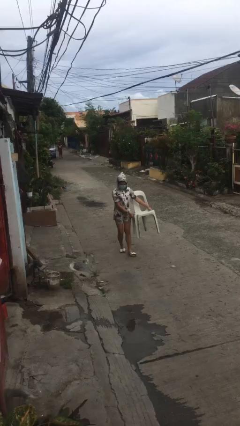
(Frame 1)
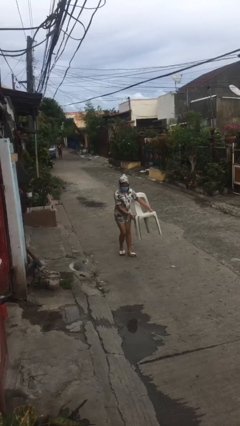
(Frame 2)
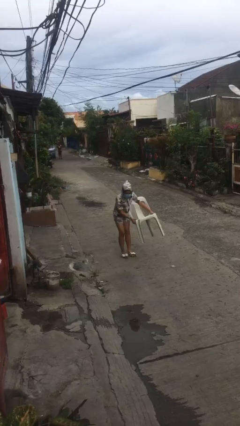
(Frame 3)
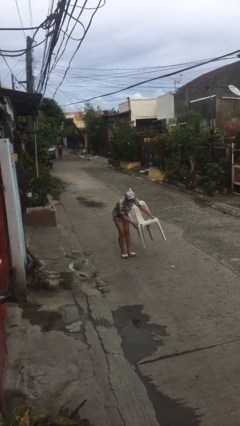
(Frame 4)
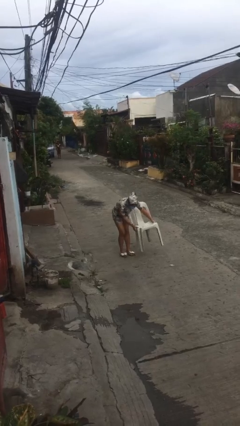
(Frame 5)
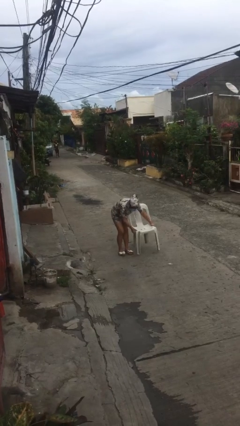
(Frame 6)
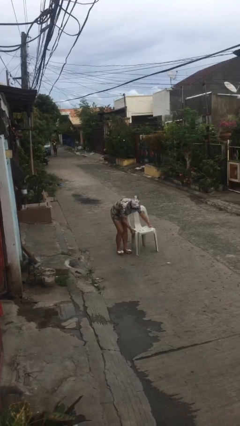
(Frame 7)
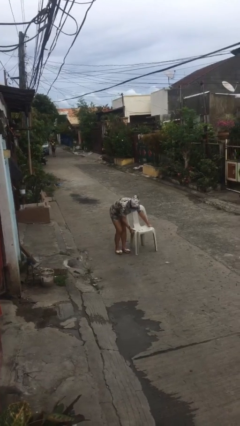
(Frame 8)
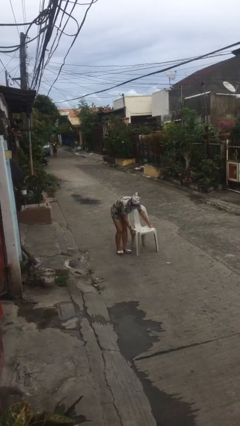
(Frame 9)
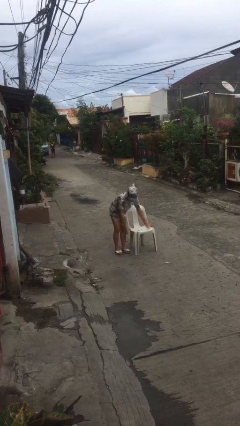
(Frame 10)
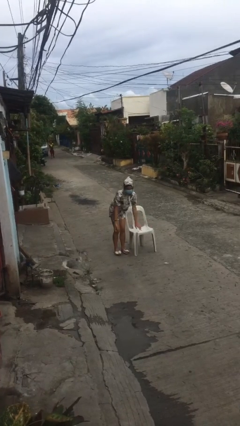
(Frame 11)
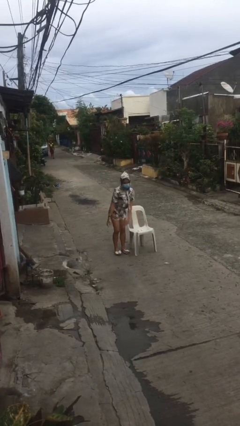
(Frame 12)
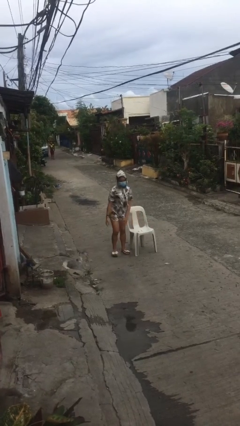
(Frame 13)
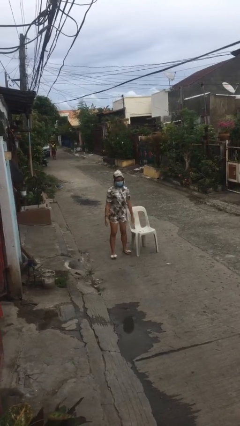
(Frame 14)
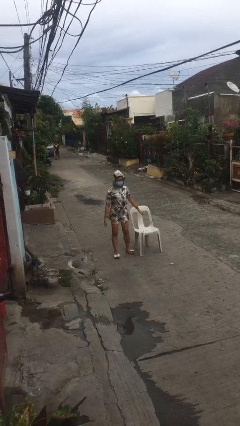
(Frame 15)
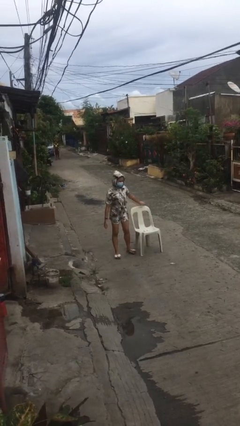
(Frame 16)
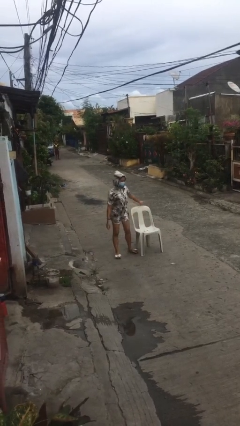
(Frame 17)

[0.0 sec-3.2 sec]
person puts down object on floor

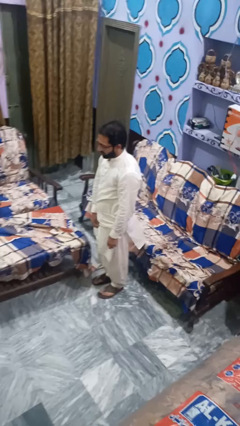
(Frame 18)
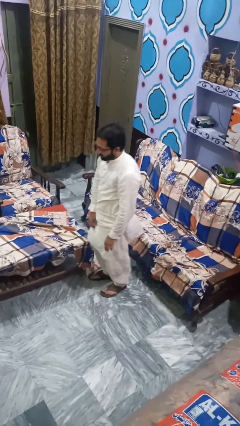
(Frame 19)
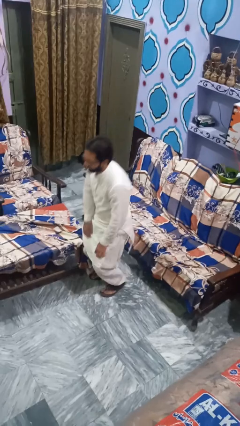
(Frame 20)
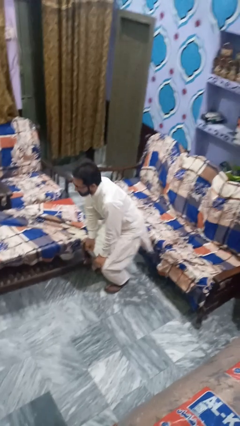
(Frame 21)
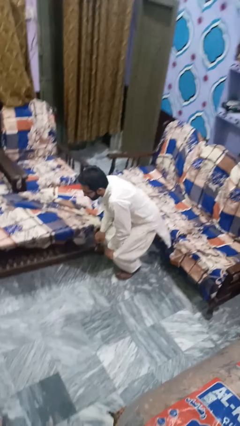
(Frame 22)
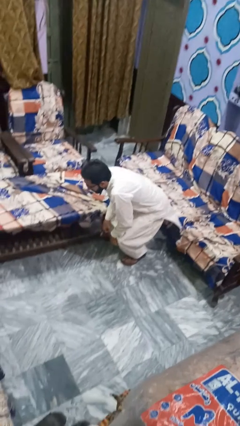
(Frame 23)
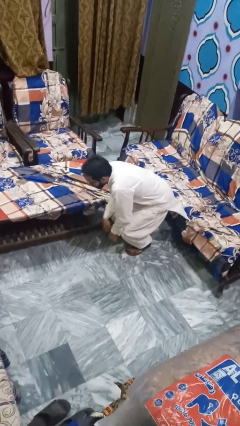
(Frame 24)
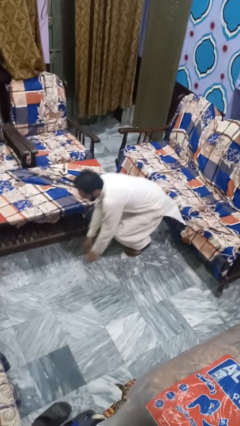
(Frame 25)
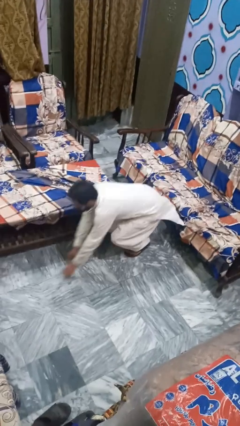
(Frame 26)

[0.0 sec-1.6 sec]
person trips on object on floor

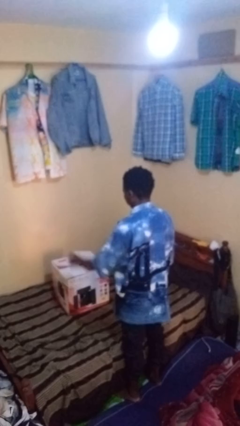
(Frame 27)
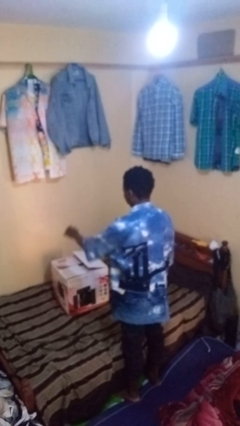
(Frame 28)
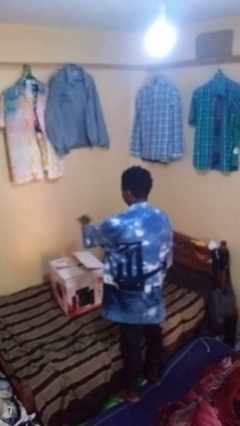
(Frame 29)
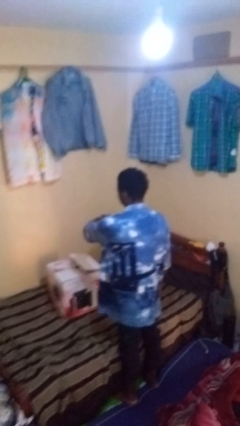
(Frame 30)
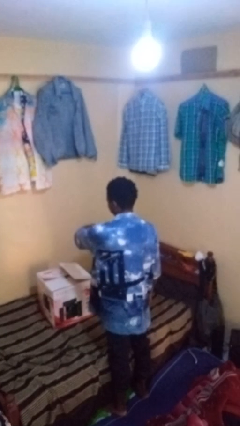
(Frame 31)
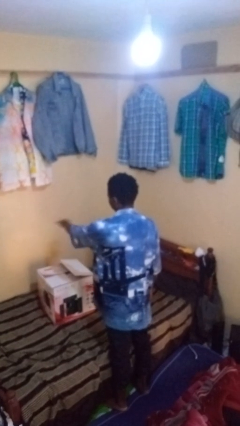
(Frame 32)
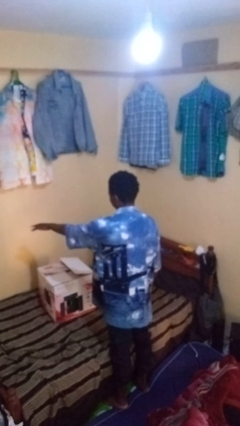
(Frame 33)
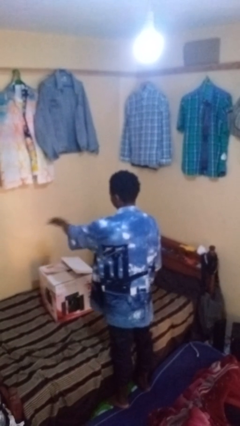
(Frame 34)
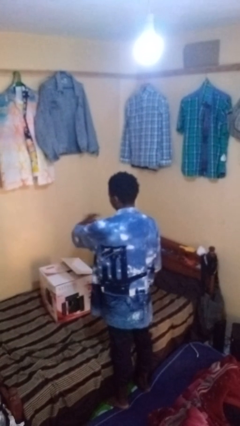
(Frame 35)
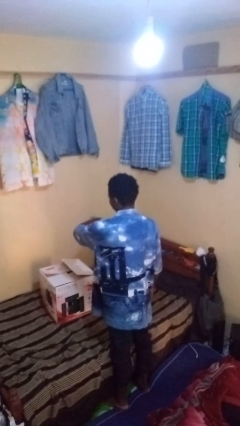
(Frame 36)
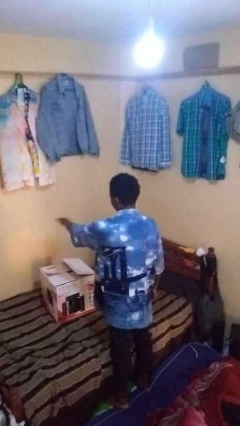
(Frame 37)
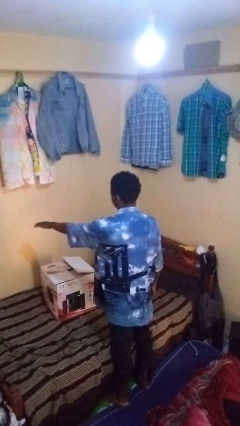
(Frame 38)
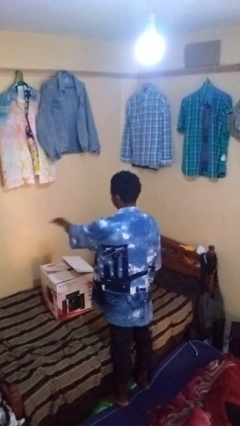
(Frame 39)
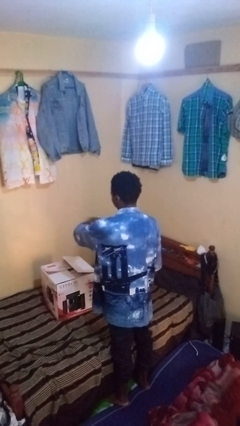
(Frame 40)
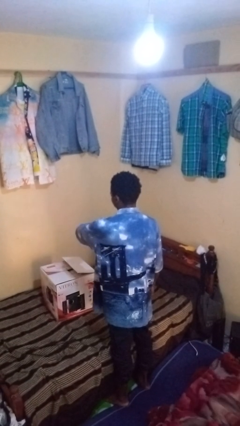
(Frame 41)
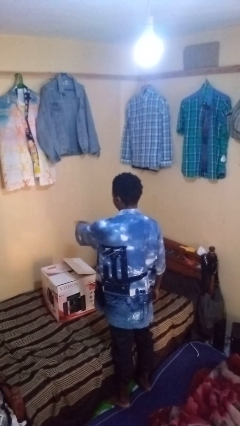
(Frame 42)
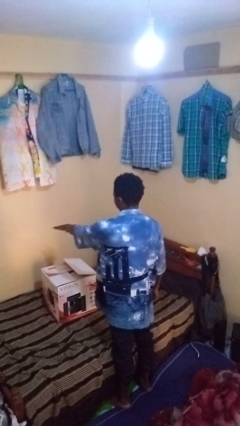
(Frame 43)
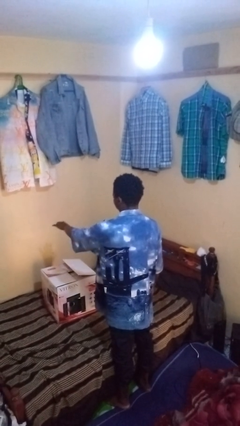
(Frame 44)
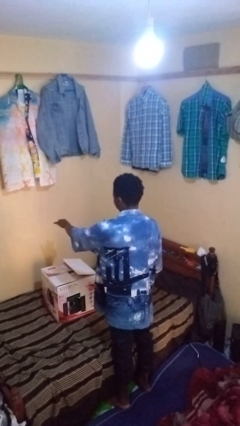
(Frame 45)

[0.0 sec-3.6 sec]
person waves hand over object

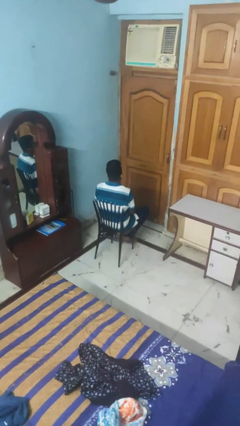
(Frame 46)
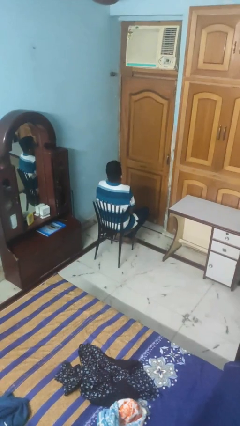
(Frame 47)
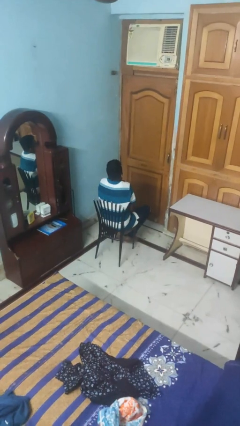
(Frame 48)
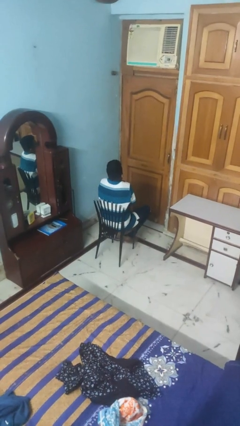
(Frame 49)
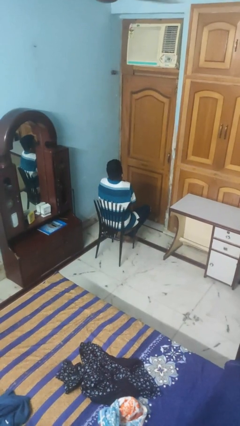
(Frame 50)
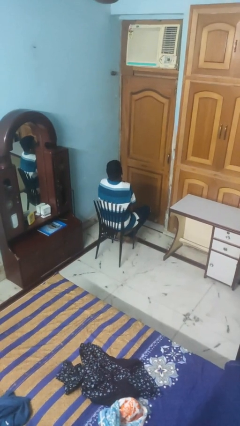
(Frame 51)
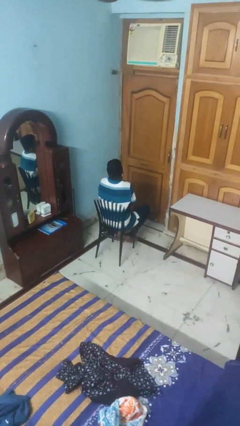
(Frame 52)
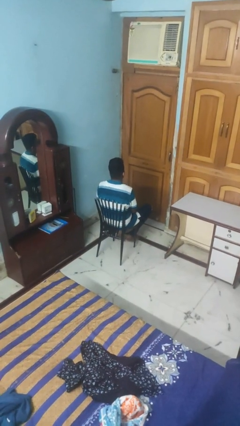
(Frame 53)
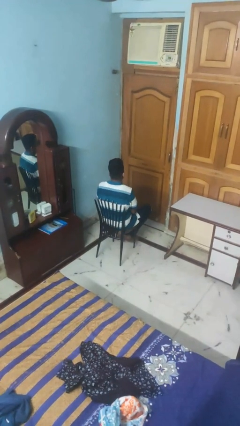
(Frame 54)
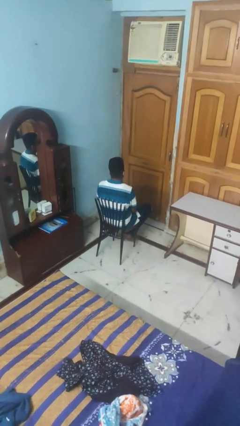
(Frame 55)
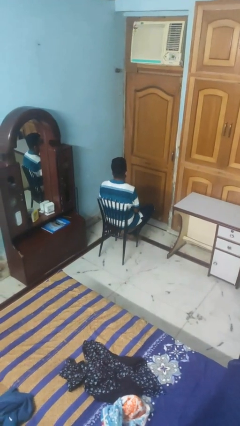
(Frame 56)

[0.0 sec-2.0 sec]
person shrugs

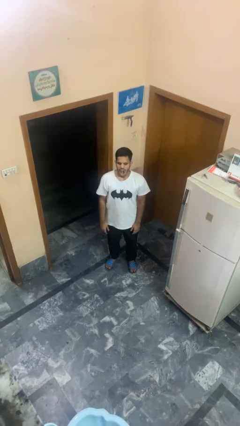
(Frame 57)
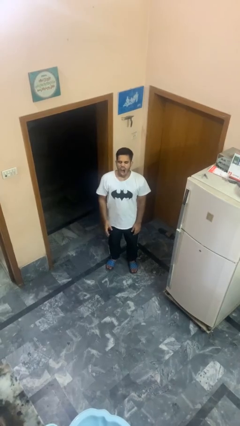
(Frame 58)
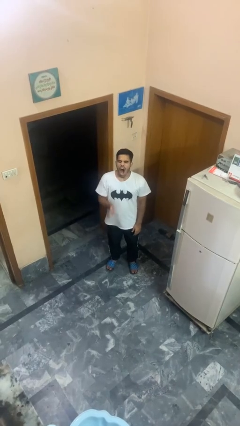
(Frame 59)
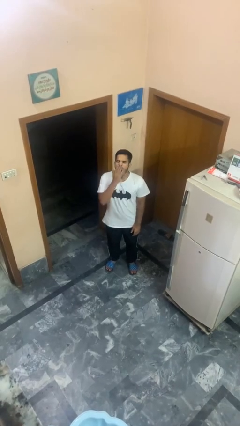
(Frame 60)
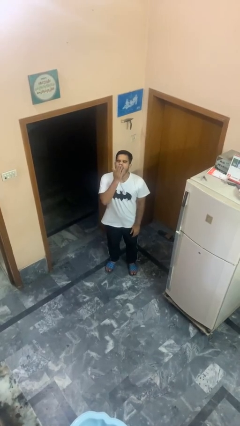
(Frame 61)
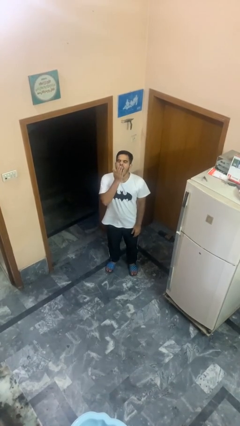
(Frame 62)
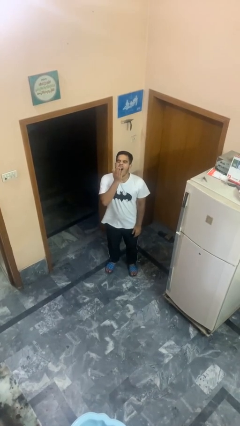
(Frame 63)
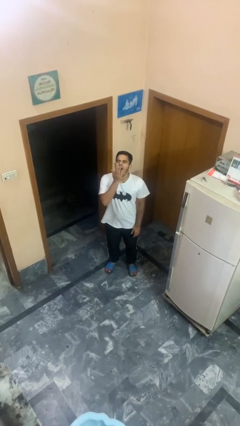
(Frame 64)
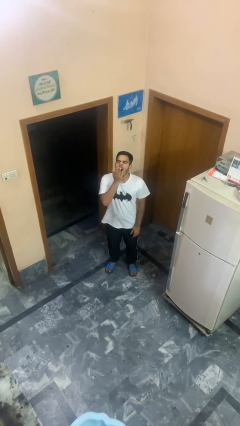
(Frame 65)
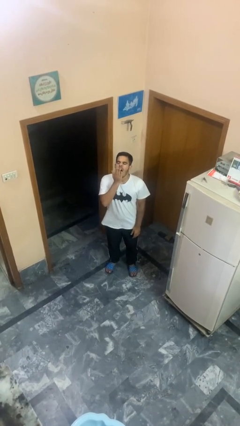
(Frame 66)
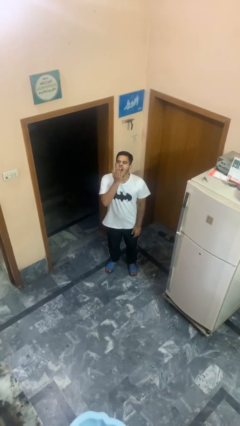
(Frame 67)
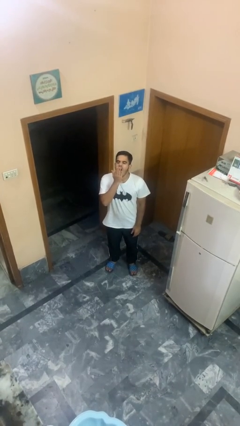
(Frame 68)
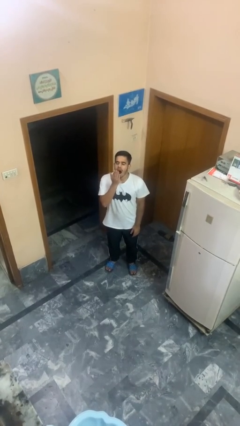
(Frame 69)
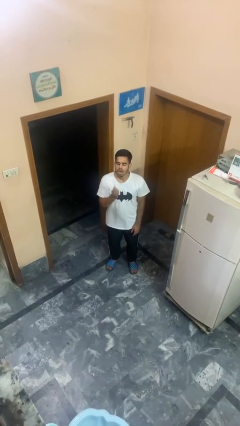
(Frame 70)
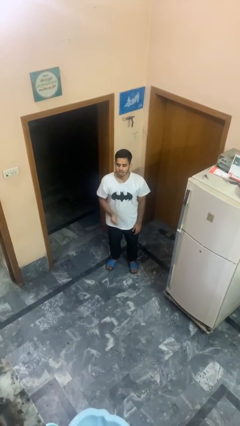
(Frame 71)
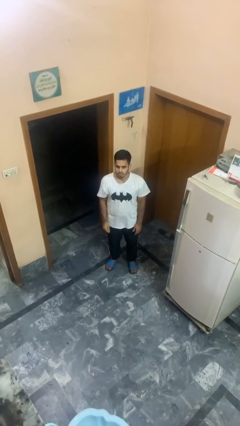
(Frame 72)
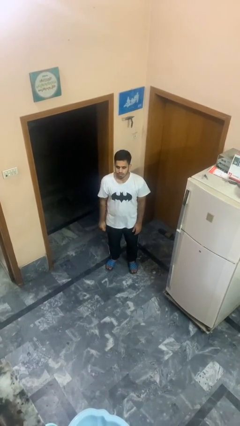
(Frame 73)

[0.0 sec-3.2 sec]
person yawns

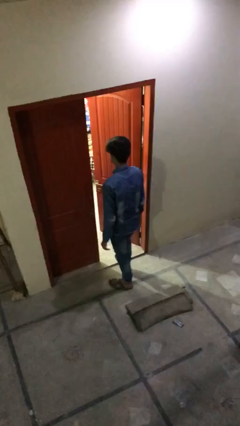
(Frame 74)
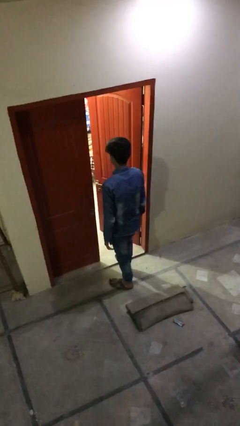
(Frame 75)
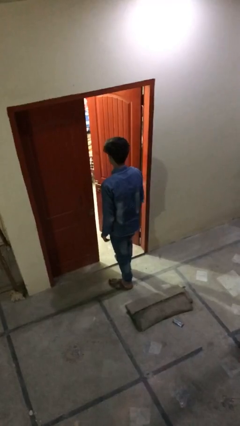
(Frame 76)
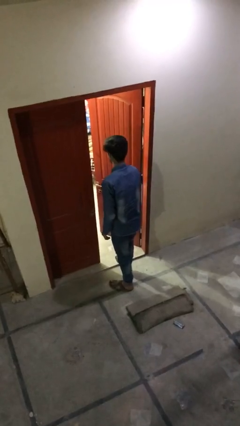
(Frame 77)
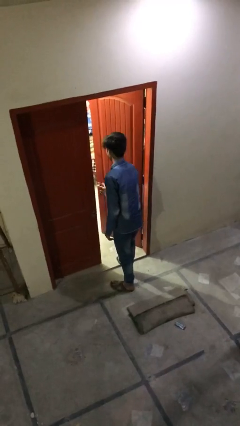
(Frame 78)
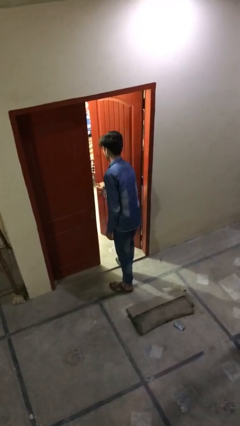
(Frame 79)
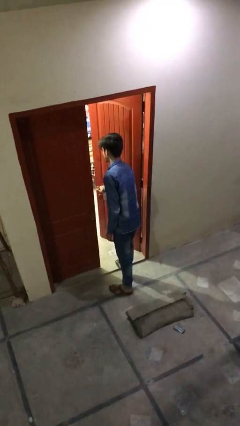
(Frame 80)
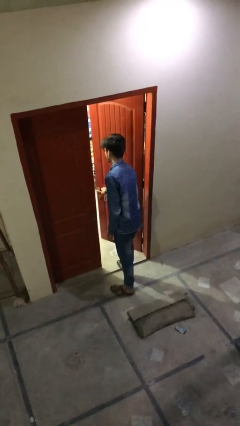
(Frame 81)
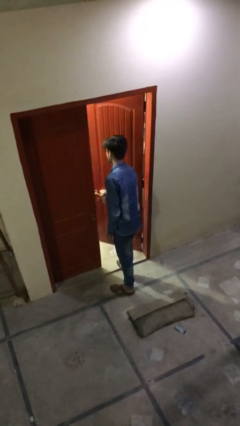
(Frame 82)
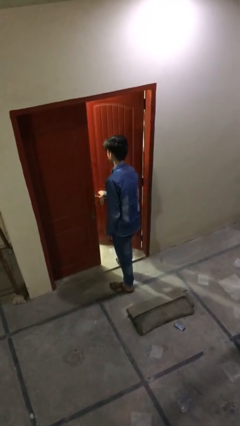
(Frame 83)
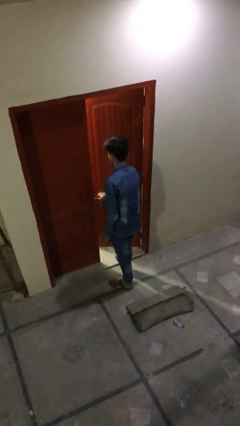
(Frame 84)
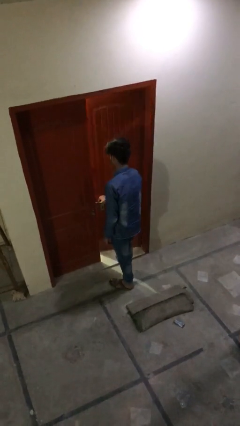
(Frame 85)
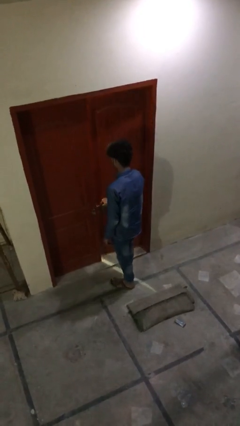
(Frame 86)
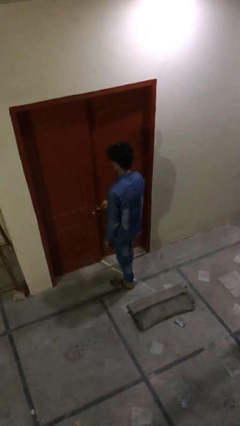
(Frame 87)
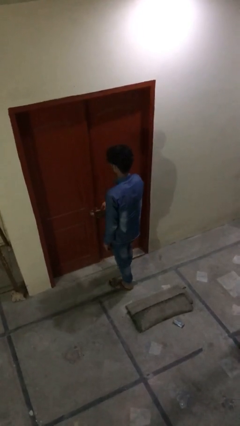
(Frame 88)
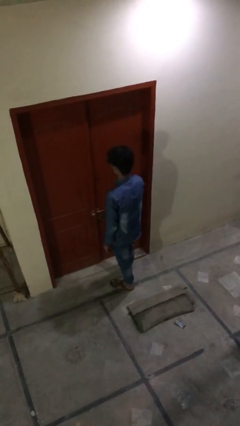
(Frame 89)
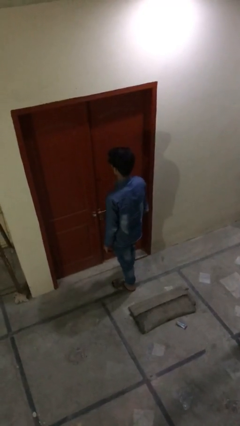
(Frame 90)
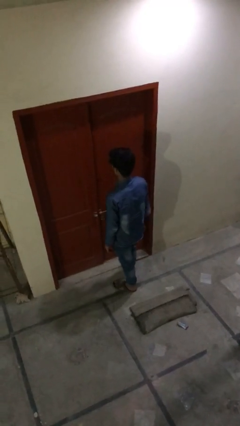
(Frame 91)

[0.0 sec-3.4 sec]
person closes facility door

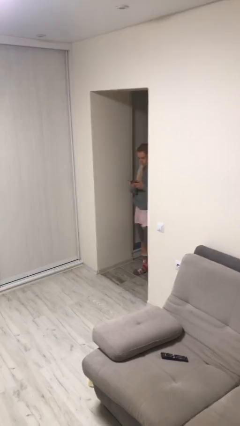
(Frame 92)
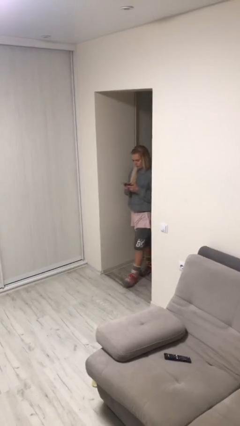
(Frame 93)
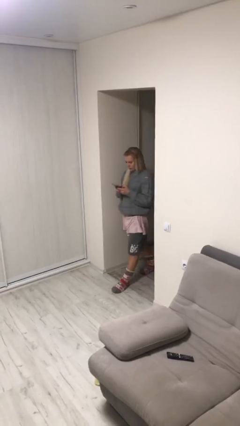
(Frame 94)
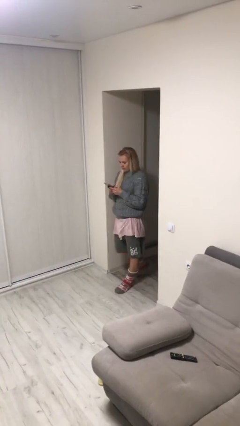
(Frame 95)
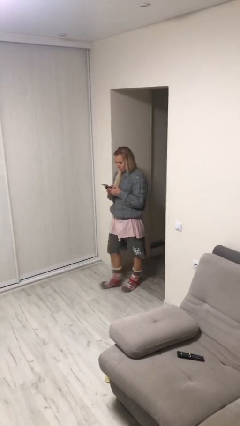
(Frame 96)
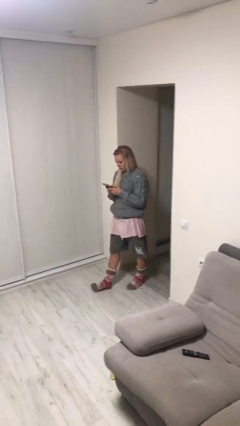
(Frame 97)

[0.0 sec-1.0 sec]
person enters scene through structure
